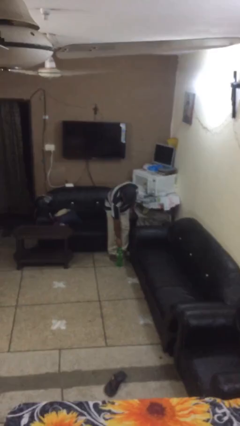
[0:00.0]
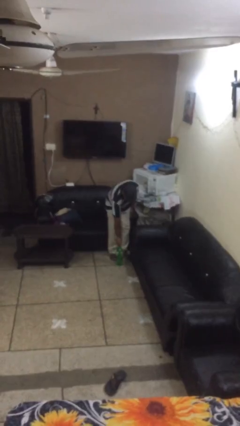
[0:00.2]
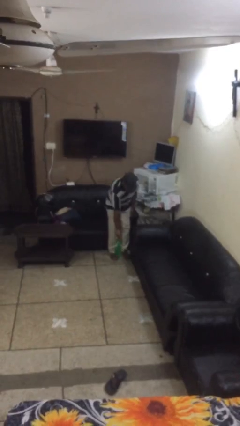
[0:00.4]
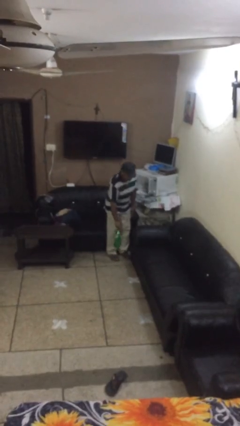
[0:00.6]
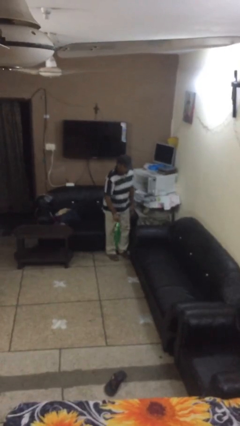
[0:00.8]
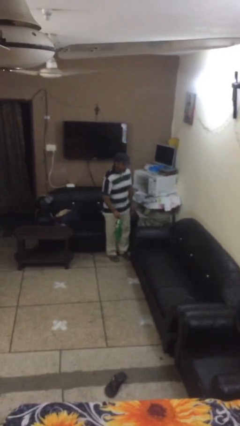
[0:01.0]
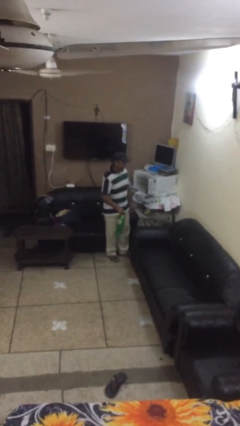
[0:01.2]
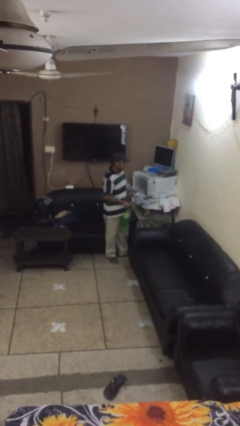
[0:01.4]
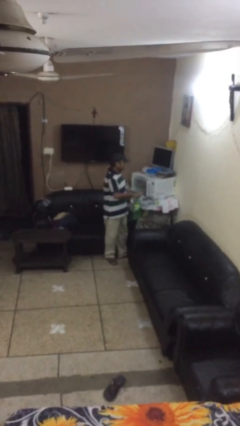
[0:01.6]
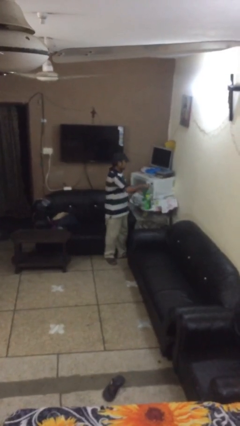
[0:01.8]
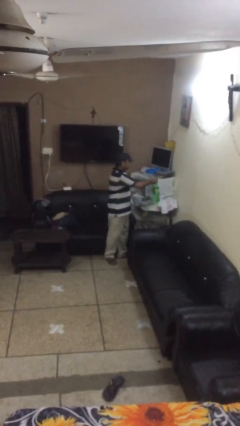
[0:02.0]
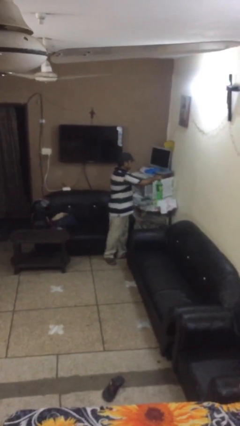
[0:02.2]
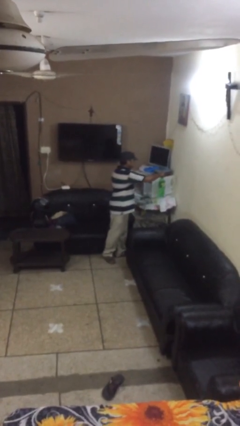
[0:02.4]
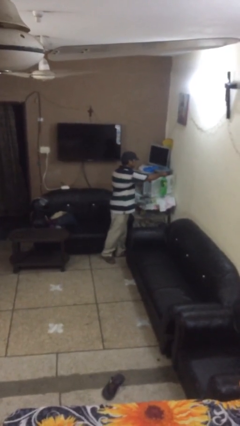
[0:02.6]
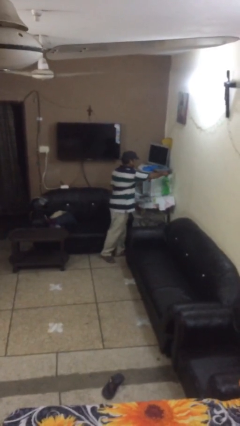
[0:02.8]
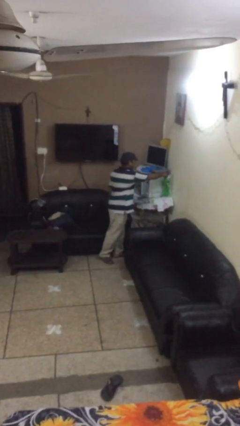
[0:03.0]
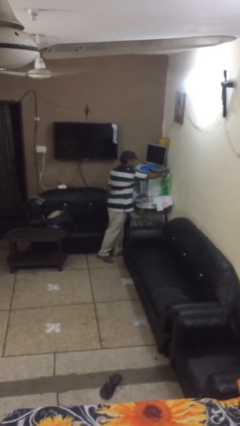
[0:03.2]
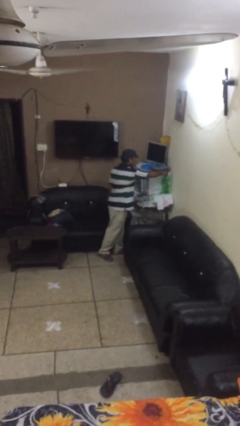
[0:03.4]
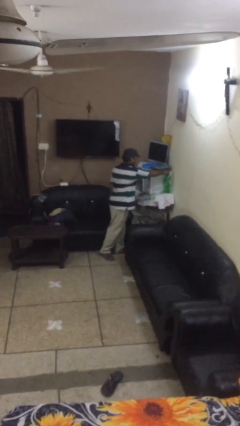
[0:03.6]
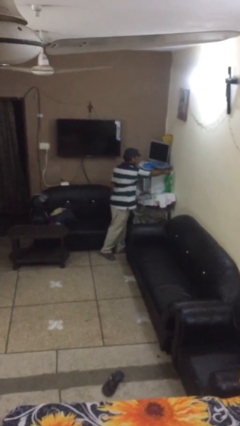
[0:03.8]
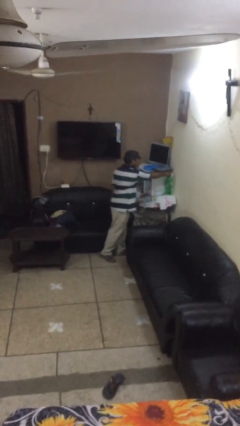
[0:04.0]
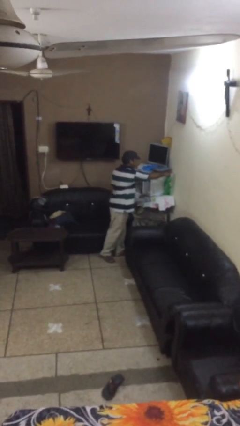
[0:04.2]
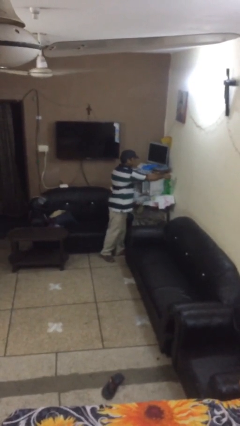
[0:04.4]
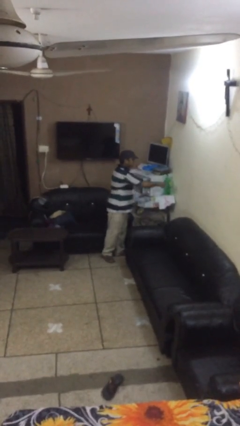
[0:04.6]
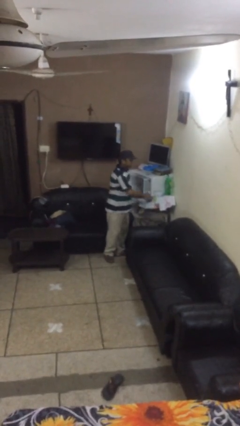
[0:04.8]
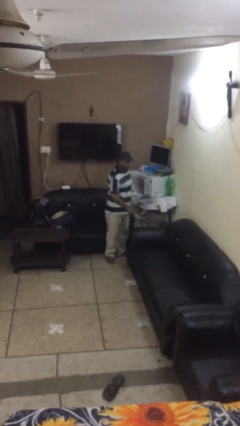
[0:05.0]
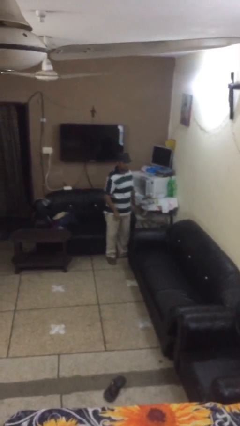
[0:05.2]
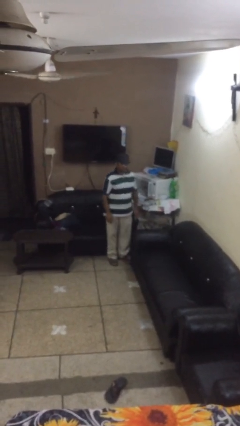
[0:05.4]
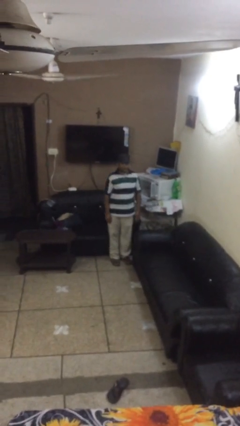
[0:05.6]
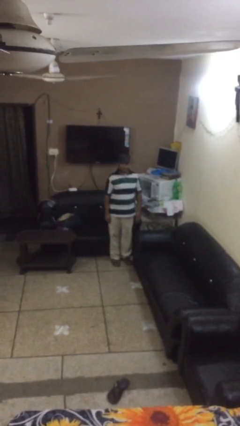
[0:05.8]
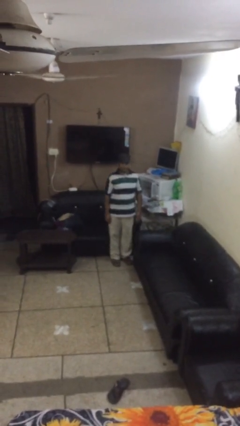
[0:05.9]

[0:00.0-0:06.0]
person puts down object on shelf

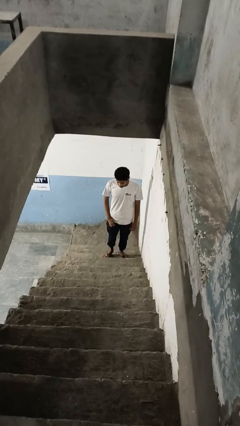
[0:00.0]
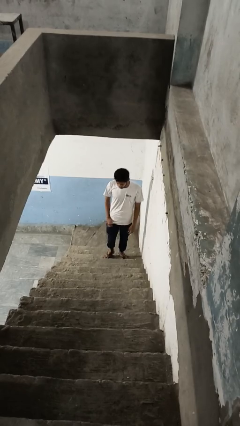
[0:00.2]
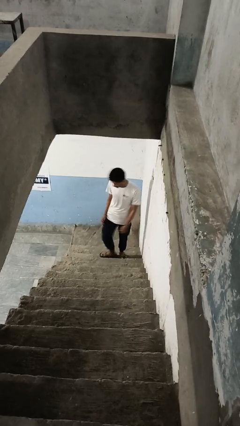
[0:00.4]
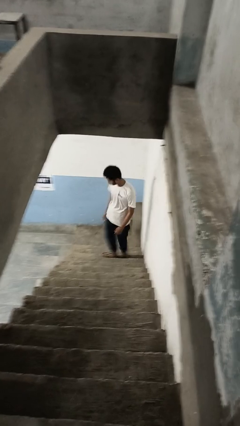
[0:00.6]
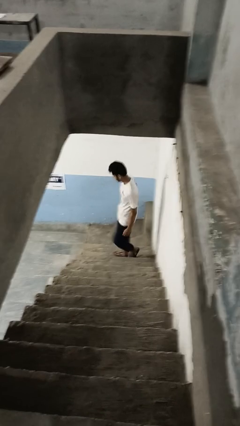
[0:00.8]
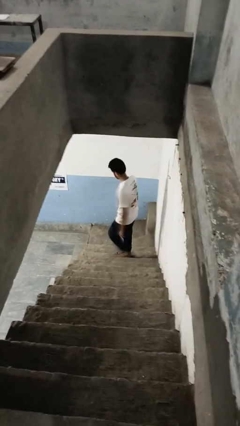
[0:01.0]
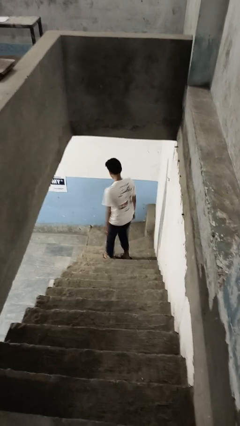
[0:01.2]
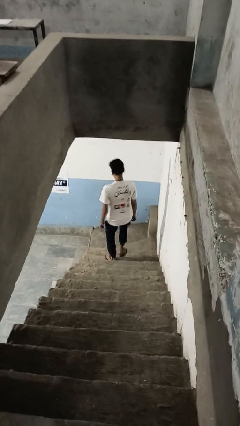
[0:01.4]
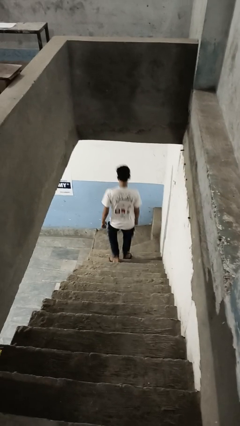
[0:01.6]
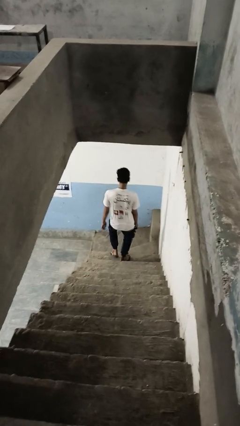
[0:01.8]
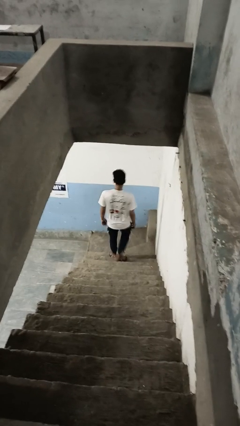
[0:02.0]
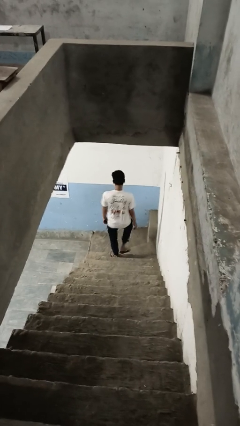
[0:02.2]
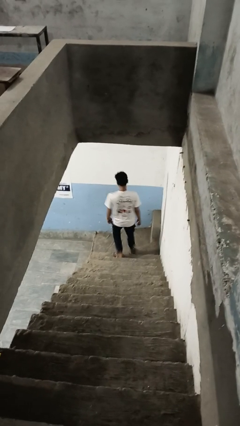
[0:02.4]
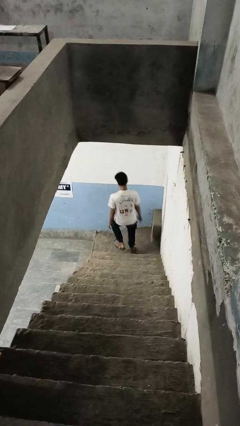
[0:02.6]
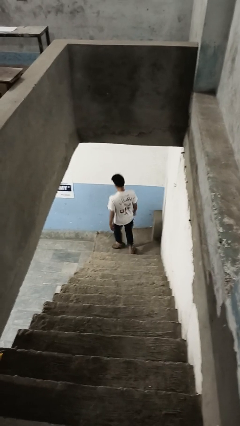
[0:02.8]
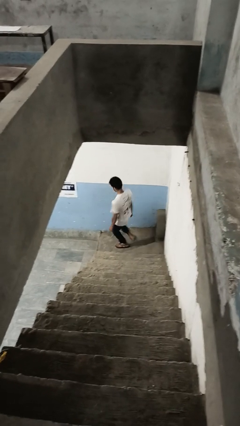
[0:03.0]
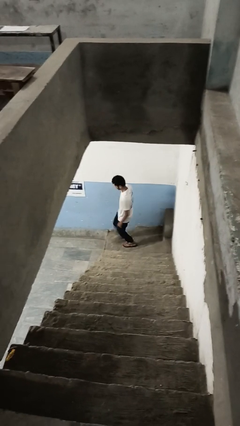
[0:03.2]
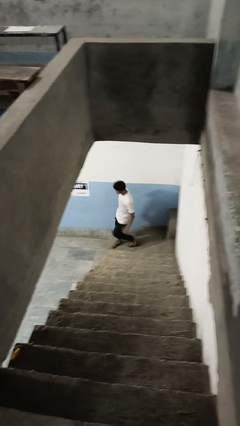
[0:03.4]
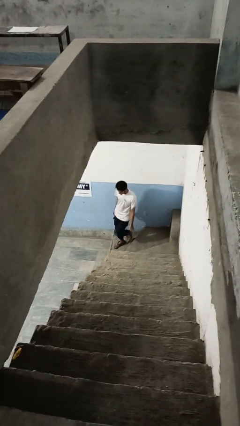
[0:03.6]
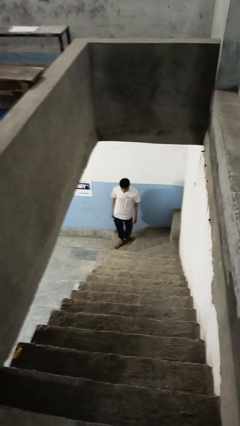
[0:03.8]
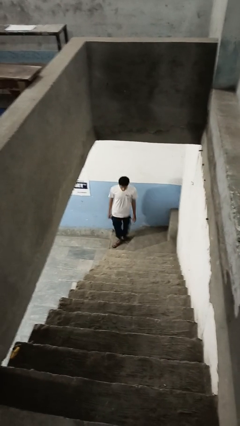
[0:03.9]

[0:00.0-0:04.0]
person climbs down stairs

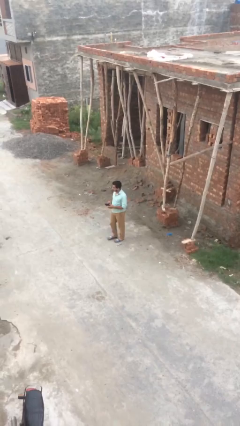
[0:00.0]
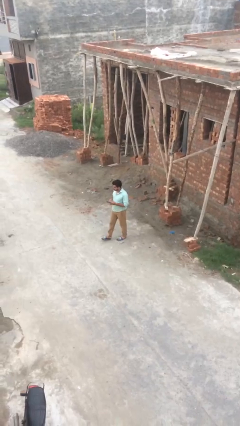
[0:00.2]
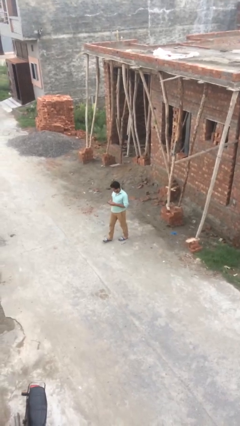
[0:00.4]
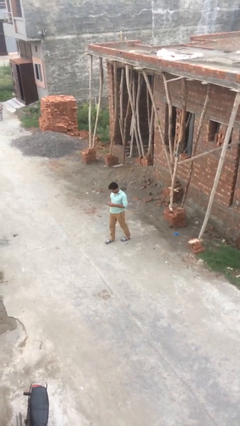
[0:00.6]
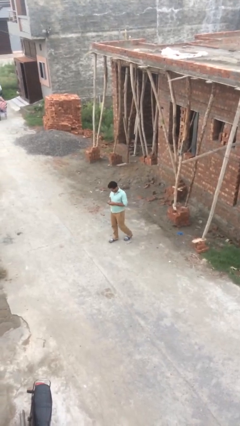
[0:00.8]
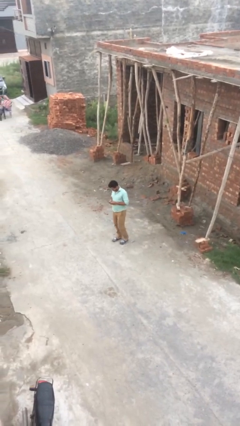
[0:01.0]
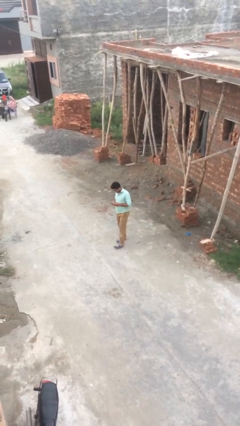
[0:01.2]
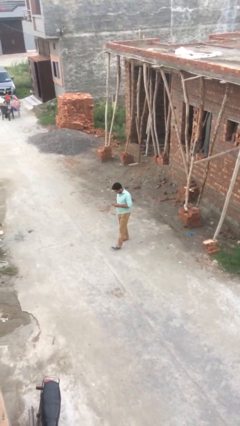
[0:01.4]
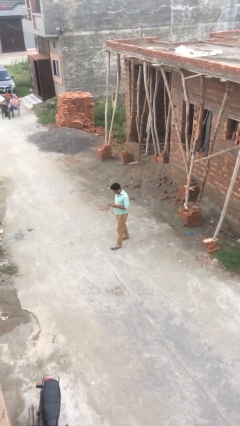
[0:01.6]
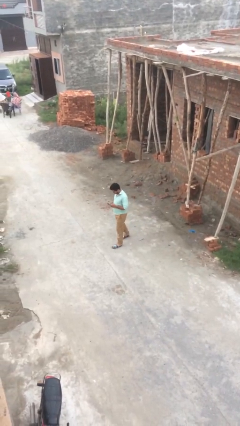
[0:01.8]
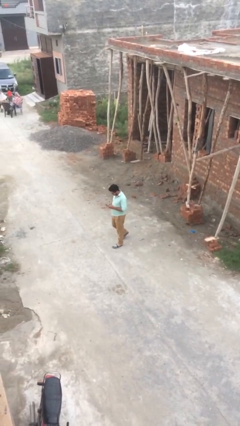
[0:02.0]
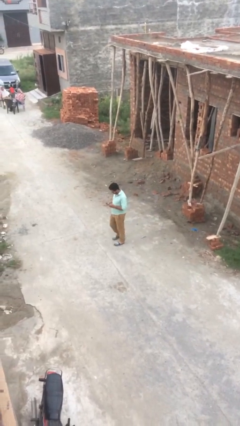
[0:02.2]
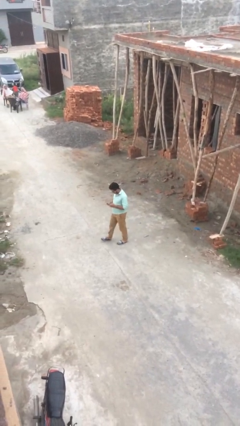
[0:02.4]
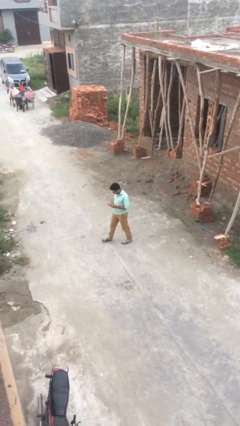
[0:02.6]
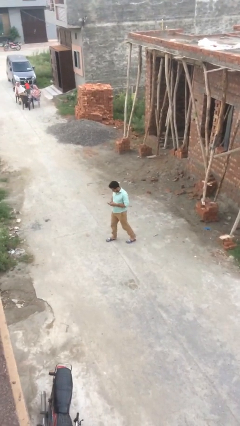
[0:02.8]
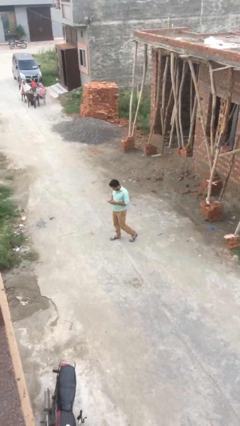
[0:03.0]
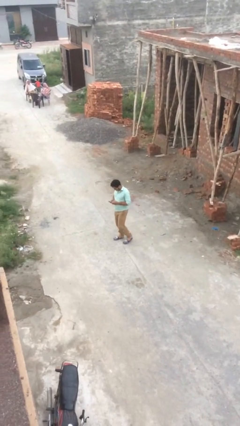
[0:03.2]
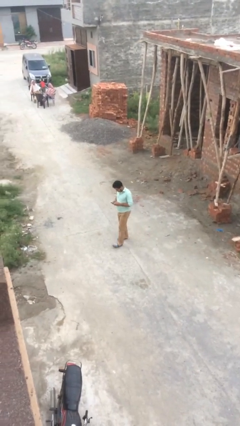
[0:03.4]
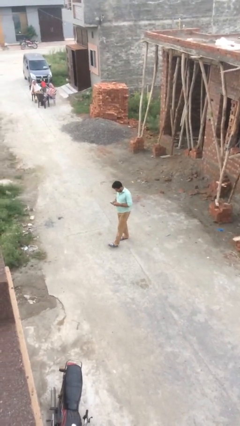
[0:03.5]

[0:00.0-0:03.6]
person texts on phone

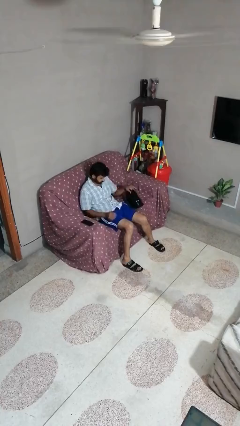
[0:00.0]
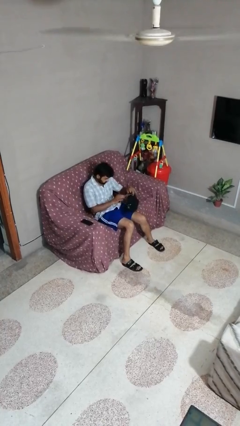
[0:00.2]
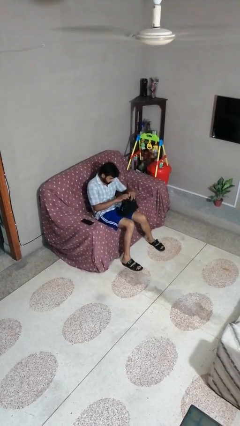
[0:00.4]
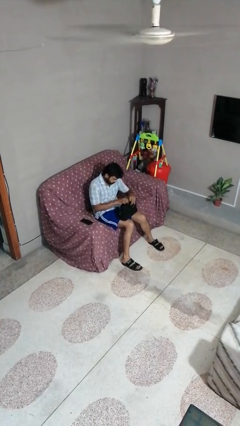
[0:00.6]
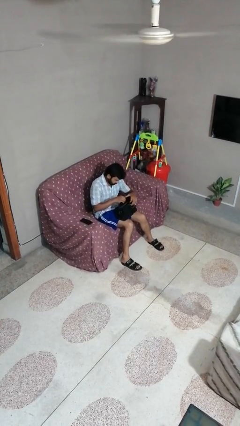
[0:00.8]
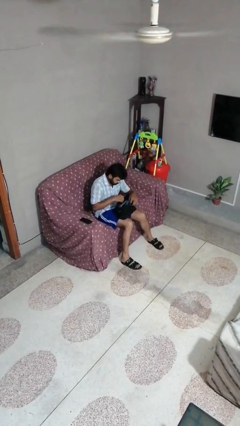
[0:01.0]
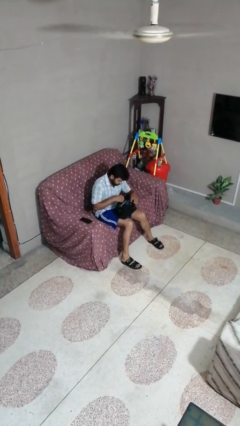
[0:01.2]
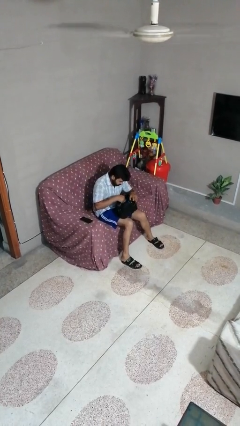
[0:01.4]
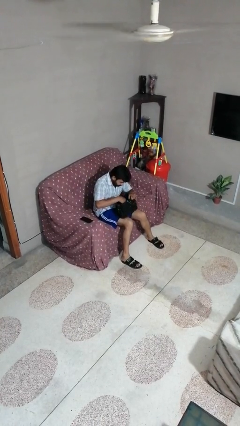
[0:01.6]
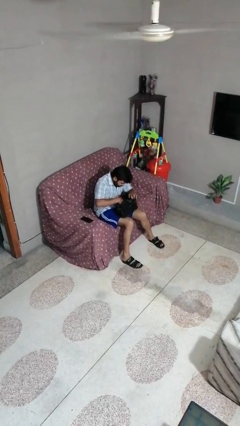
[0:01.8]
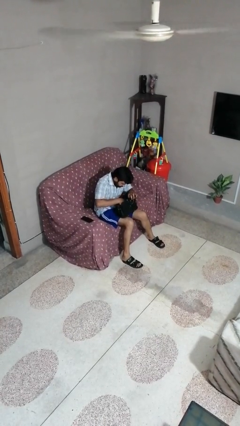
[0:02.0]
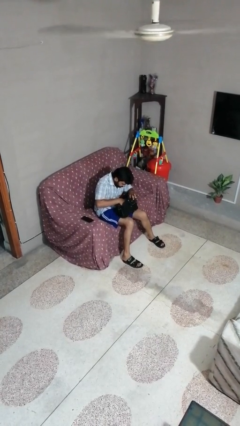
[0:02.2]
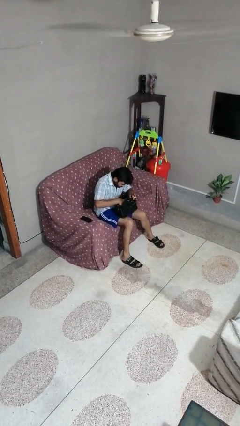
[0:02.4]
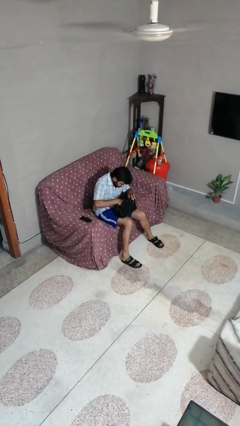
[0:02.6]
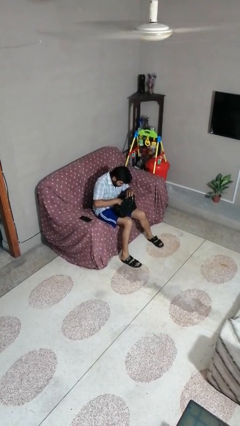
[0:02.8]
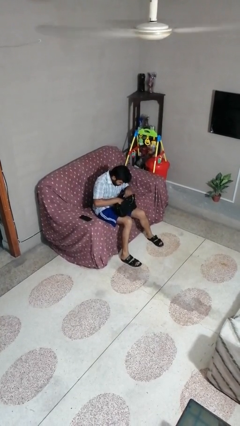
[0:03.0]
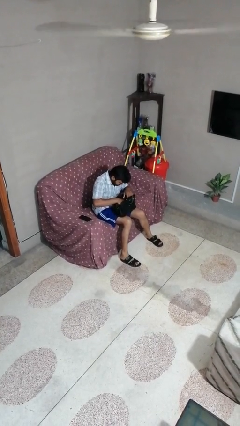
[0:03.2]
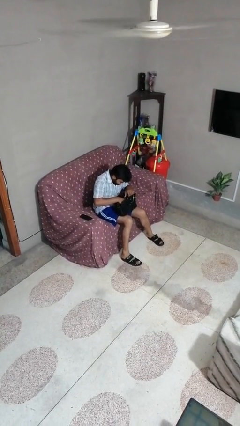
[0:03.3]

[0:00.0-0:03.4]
person searches in purse

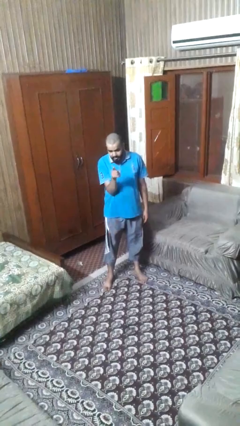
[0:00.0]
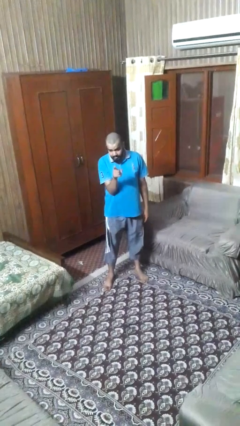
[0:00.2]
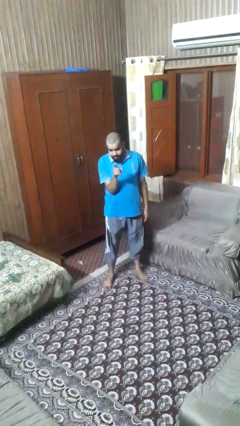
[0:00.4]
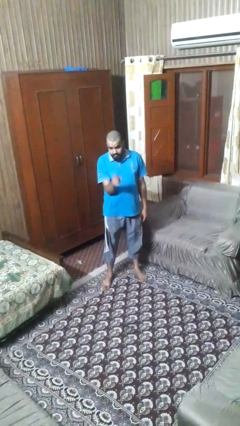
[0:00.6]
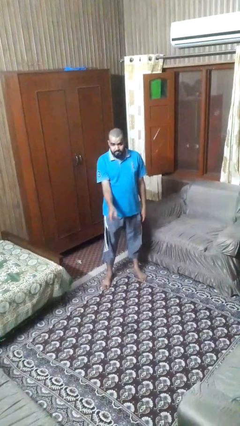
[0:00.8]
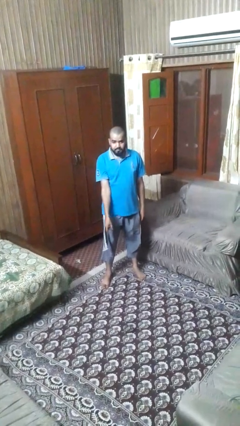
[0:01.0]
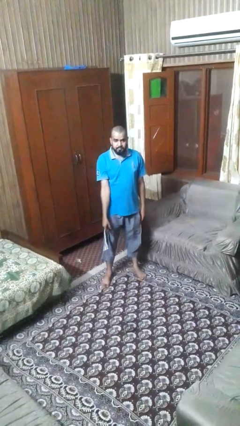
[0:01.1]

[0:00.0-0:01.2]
person points at person
